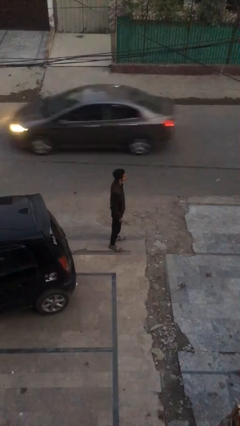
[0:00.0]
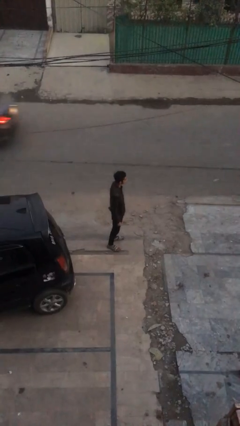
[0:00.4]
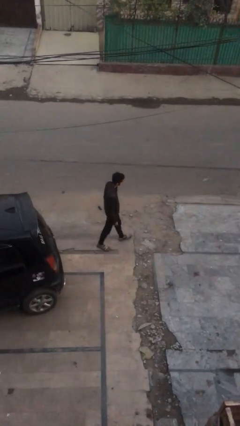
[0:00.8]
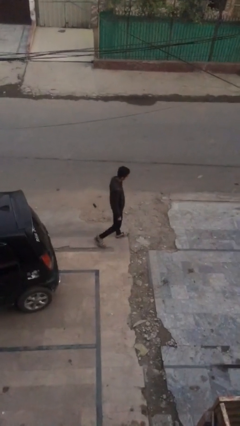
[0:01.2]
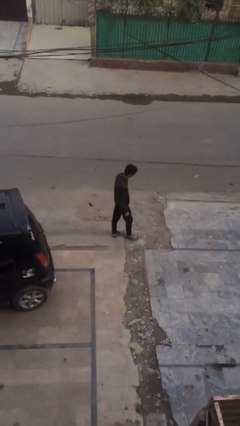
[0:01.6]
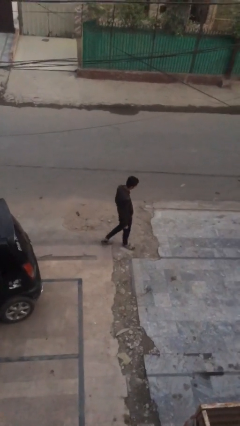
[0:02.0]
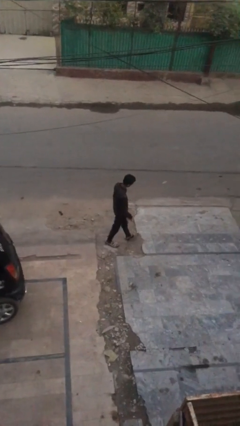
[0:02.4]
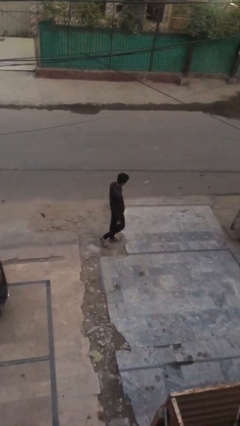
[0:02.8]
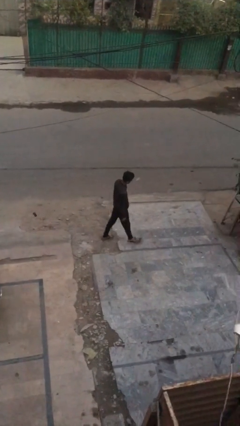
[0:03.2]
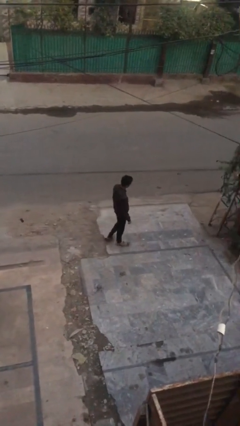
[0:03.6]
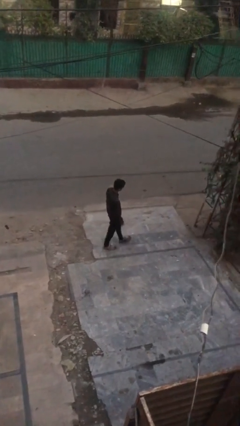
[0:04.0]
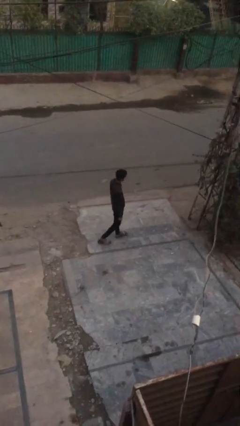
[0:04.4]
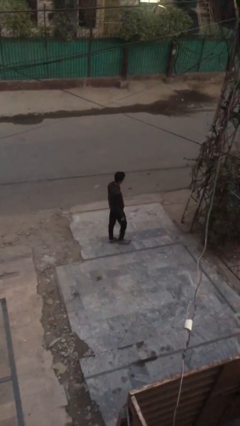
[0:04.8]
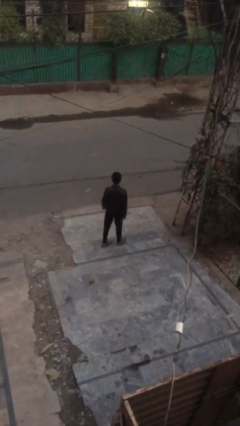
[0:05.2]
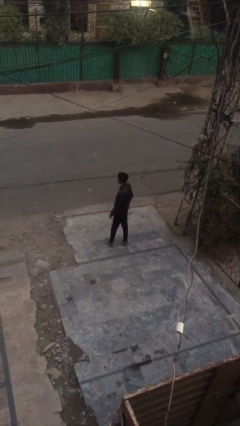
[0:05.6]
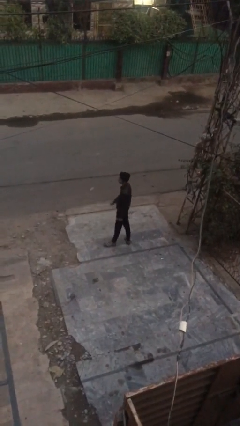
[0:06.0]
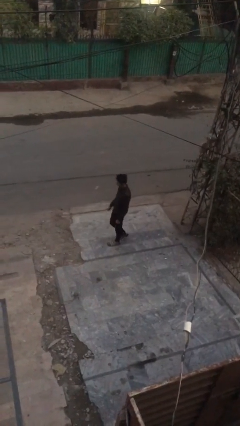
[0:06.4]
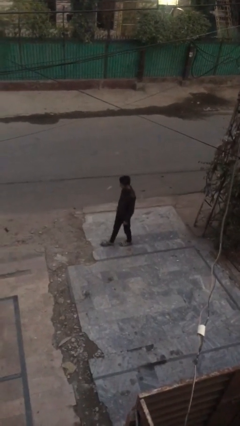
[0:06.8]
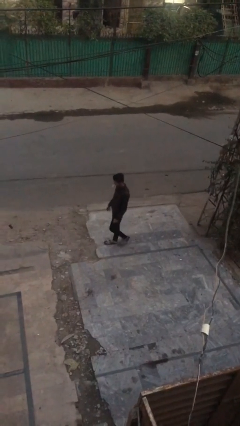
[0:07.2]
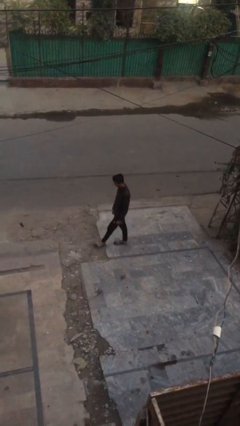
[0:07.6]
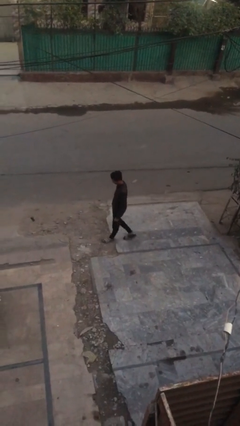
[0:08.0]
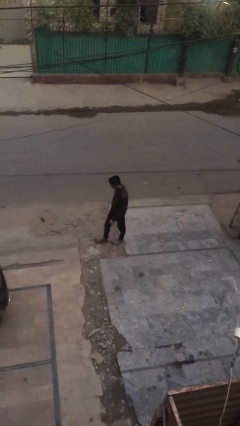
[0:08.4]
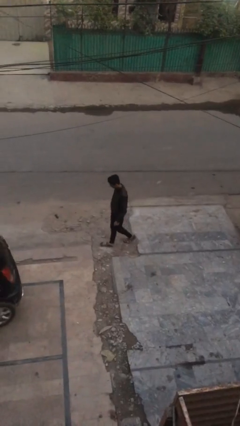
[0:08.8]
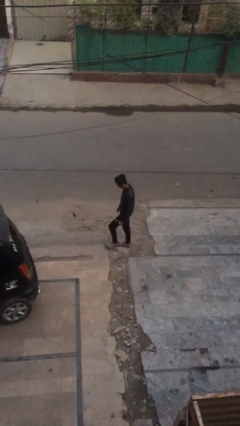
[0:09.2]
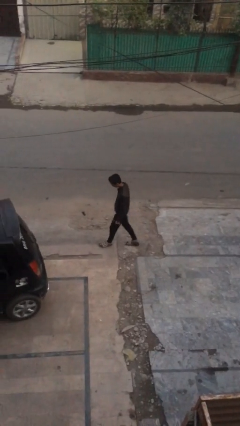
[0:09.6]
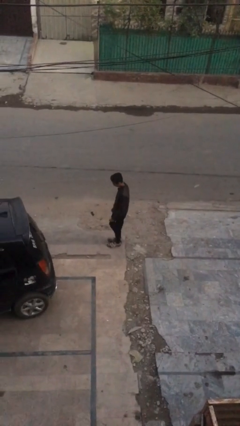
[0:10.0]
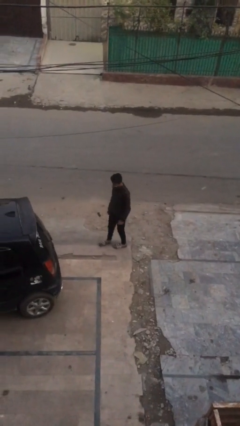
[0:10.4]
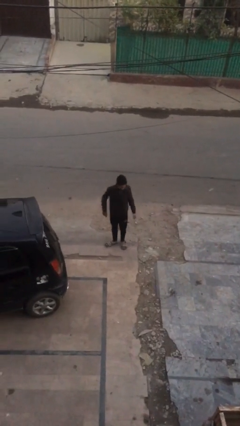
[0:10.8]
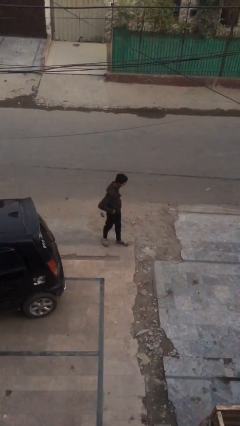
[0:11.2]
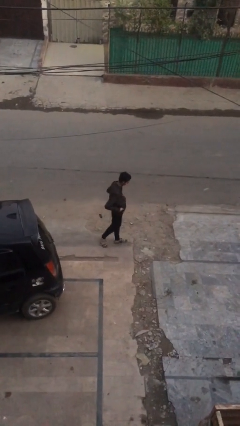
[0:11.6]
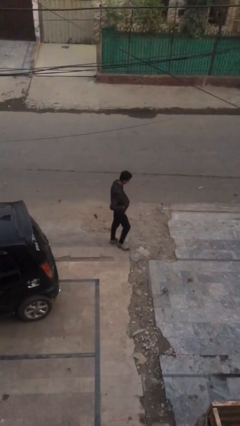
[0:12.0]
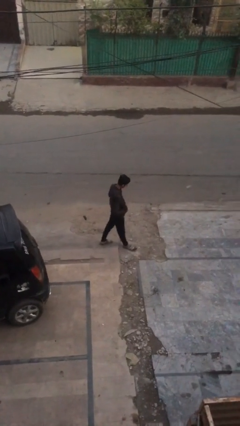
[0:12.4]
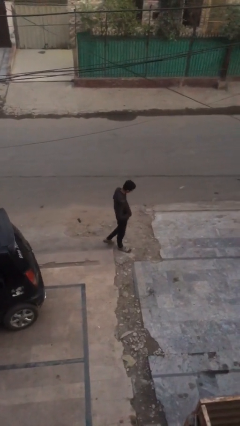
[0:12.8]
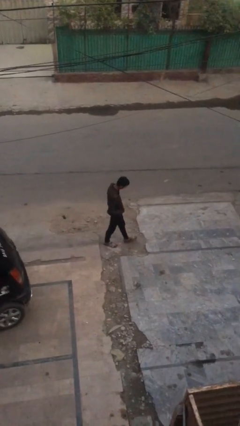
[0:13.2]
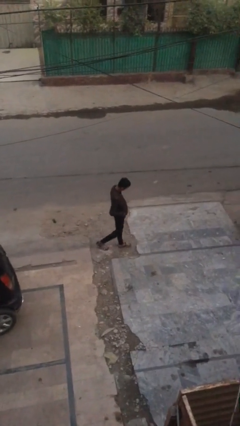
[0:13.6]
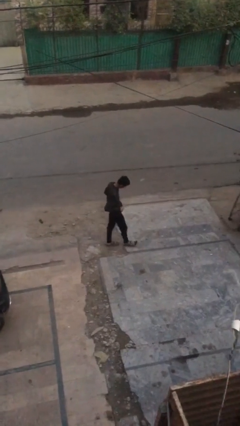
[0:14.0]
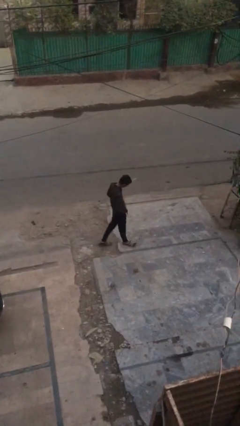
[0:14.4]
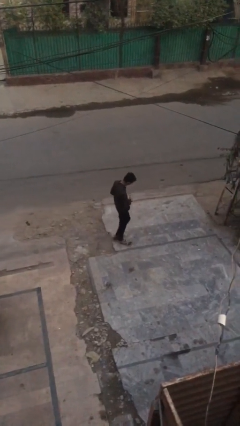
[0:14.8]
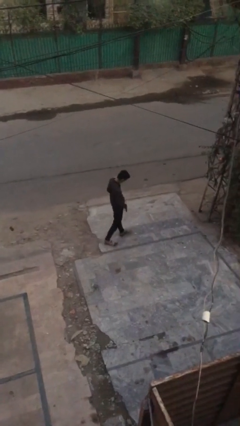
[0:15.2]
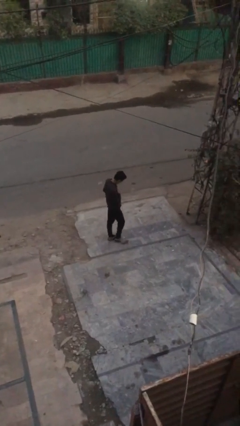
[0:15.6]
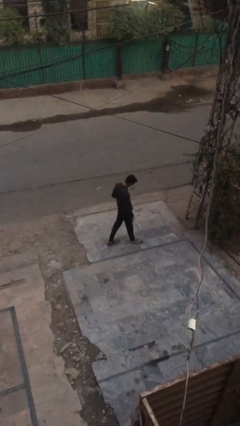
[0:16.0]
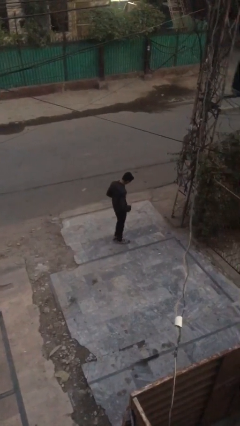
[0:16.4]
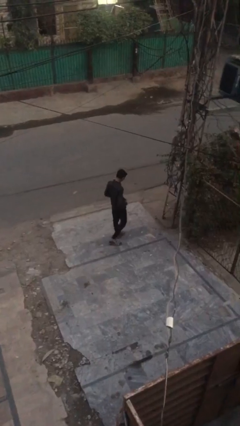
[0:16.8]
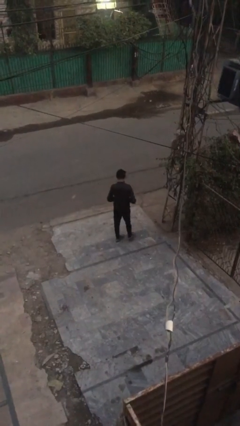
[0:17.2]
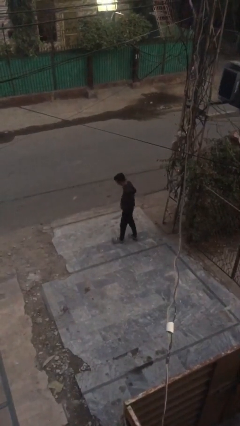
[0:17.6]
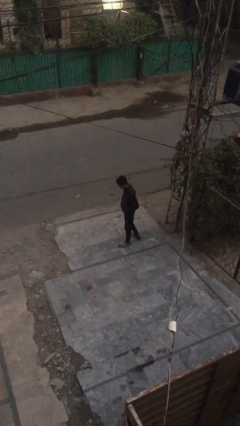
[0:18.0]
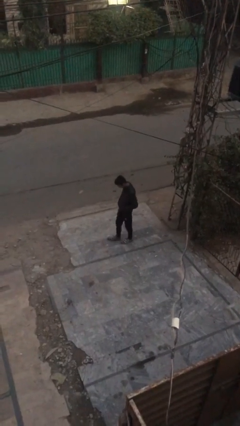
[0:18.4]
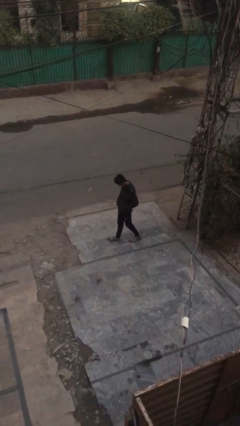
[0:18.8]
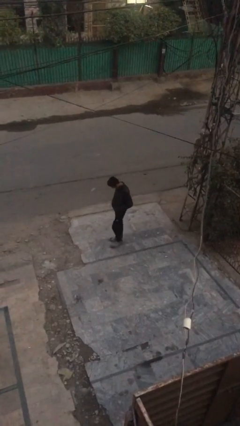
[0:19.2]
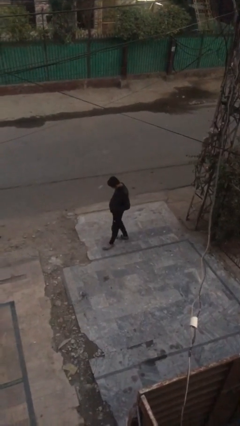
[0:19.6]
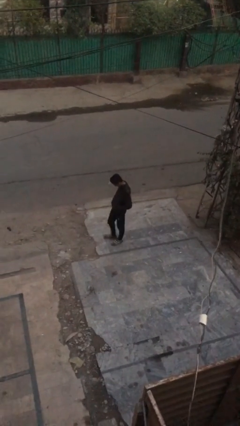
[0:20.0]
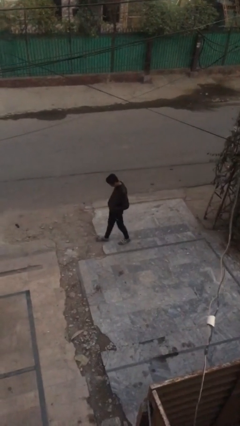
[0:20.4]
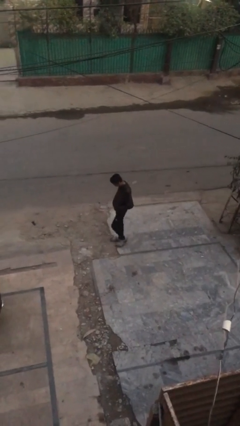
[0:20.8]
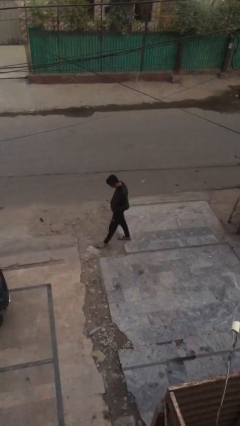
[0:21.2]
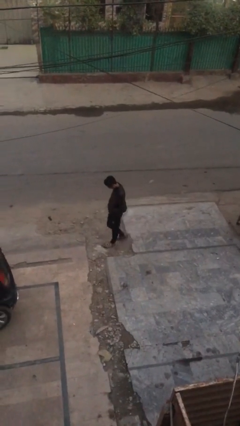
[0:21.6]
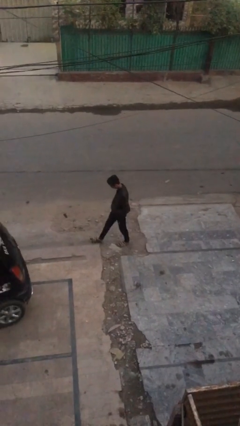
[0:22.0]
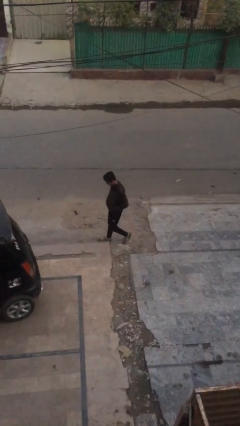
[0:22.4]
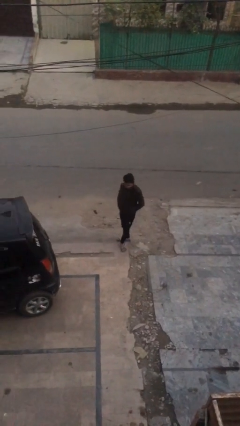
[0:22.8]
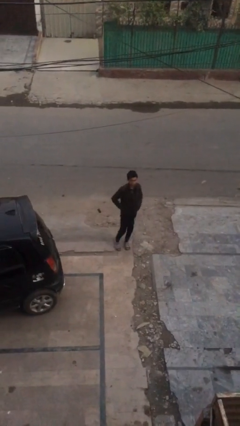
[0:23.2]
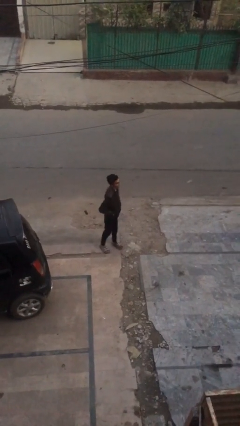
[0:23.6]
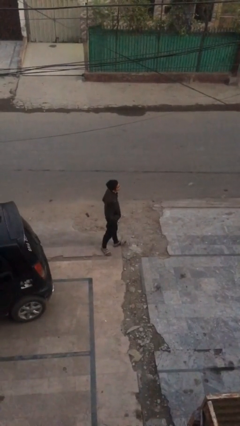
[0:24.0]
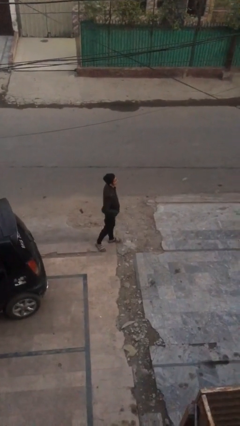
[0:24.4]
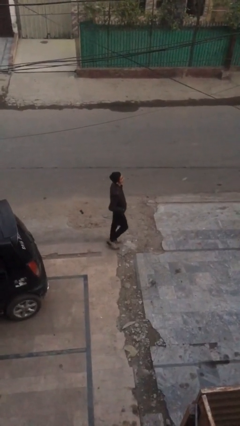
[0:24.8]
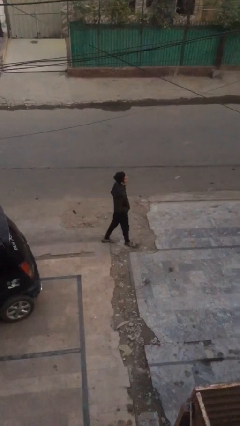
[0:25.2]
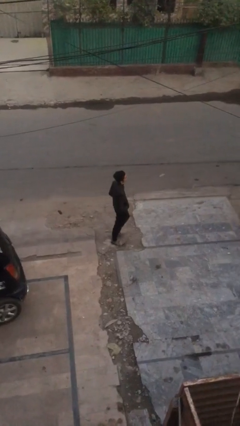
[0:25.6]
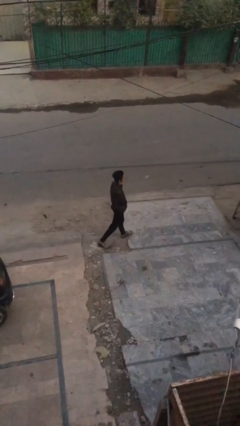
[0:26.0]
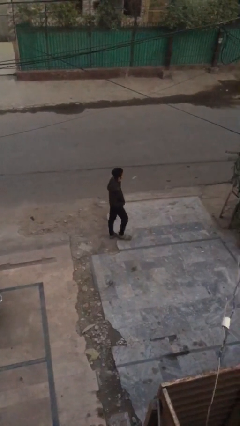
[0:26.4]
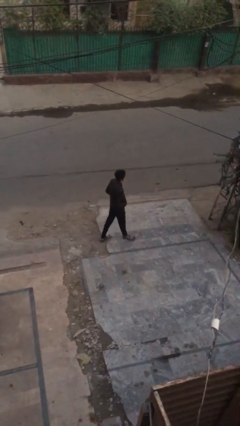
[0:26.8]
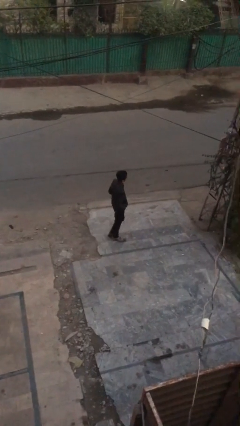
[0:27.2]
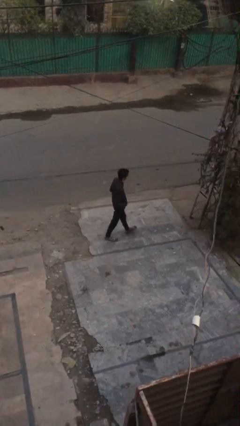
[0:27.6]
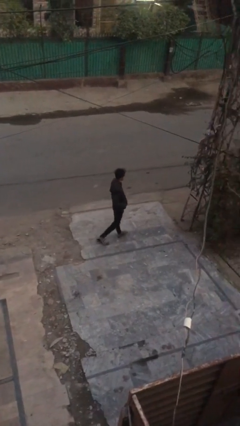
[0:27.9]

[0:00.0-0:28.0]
person walks

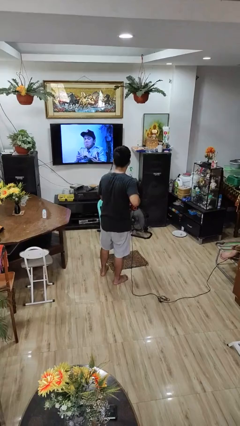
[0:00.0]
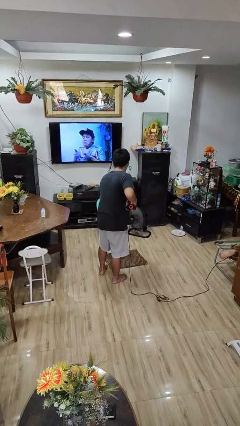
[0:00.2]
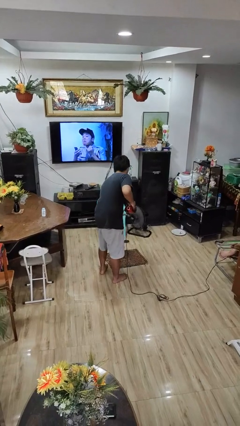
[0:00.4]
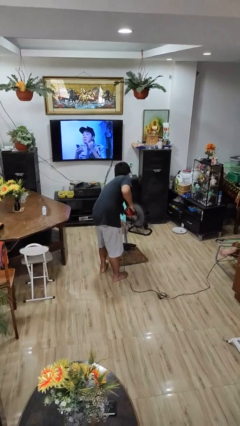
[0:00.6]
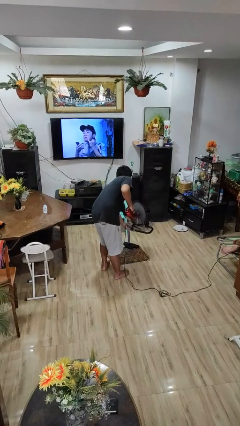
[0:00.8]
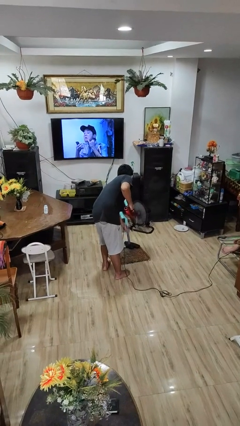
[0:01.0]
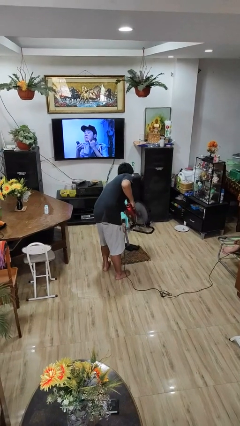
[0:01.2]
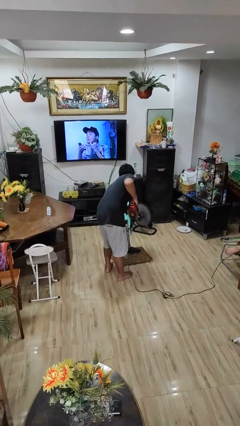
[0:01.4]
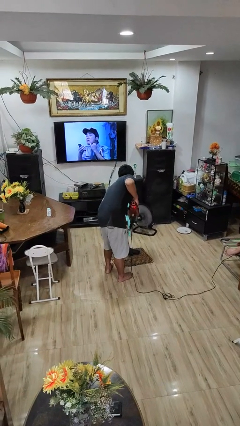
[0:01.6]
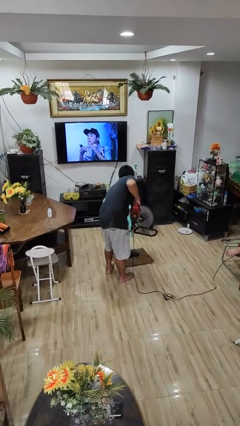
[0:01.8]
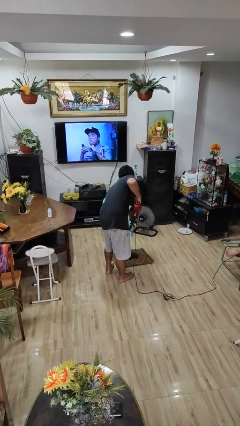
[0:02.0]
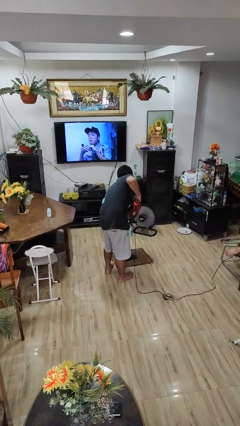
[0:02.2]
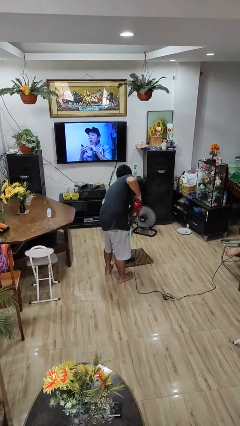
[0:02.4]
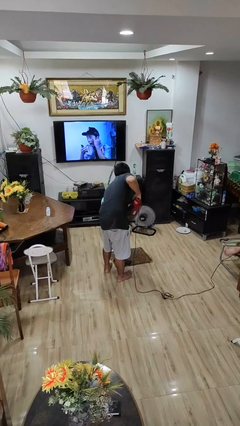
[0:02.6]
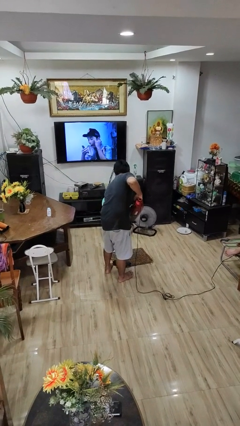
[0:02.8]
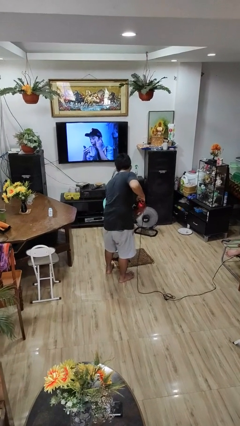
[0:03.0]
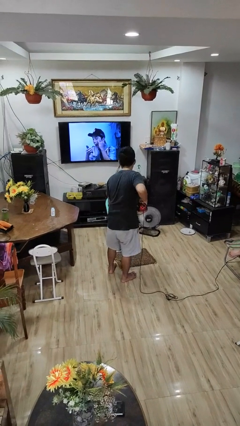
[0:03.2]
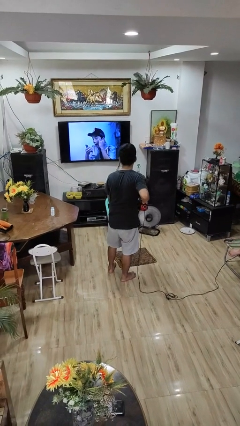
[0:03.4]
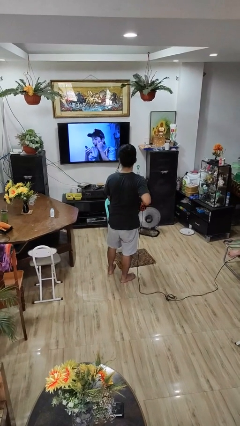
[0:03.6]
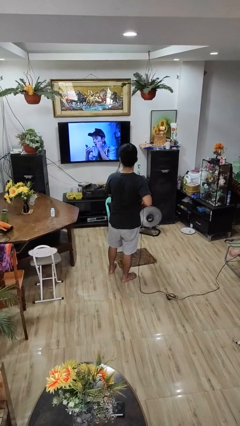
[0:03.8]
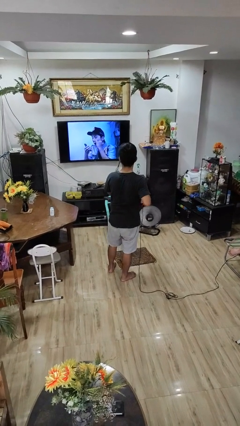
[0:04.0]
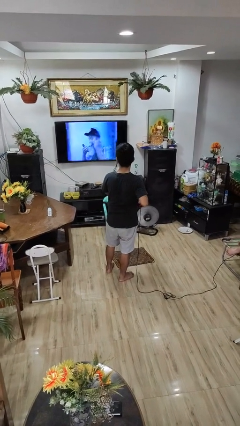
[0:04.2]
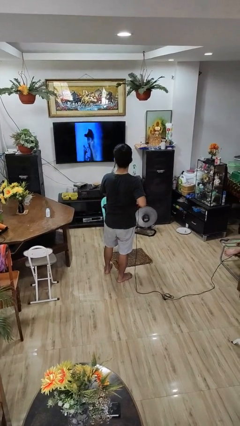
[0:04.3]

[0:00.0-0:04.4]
person vacuums carpet
